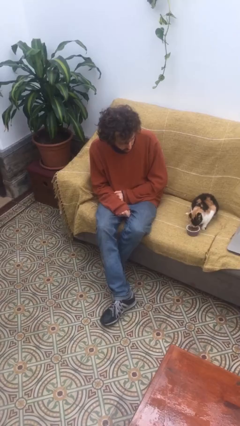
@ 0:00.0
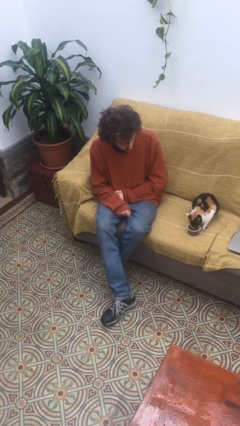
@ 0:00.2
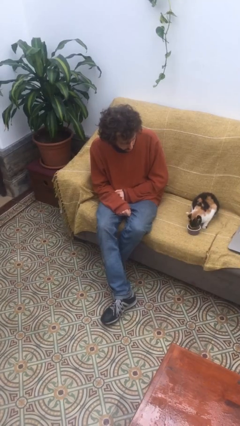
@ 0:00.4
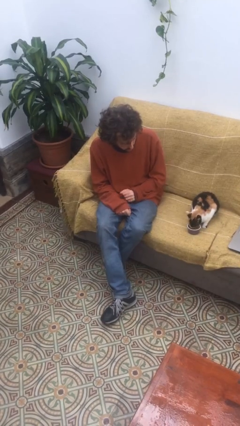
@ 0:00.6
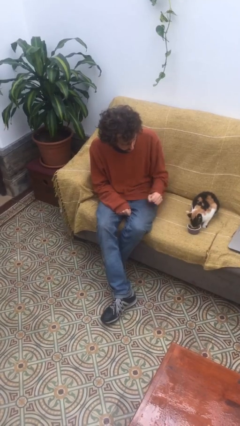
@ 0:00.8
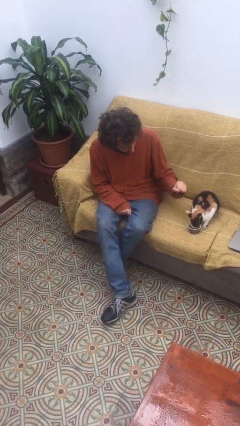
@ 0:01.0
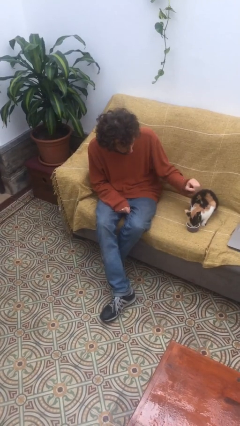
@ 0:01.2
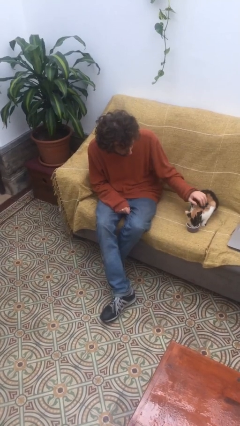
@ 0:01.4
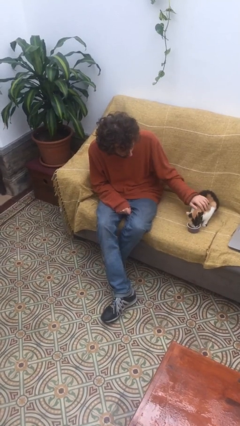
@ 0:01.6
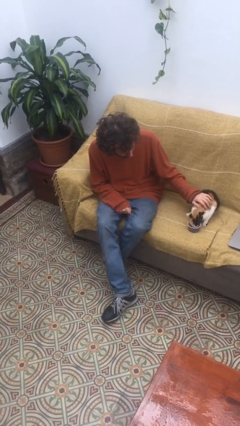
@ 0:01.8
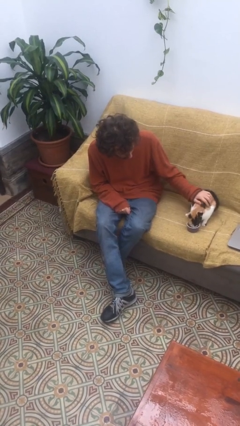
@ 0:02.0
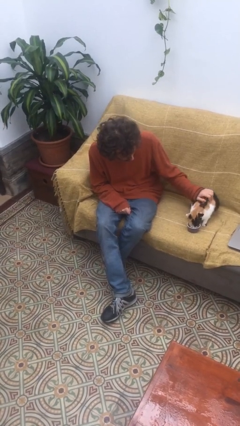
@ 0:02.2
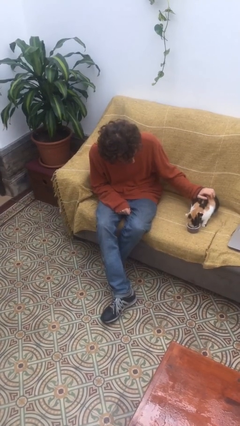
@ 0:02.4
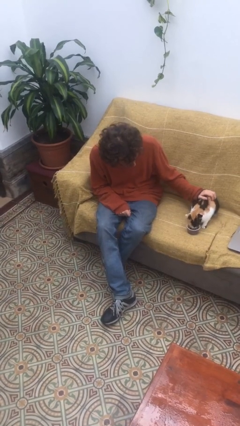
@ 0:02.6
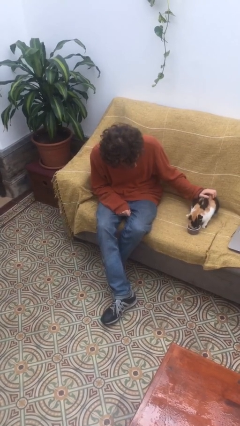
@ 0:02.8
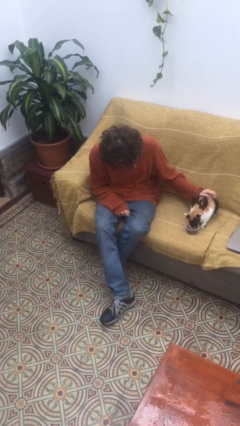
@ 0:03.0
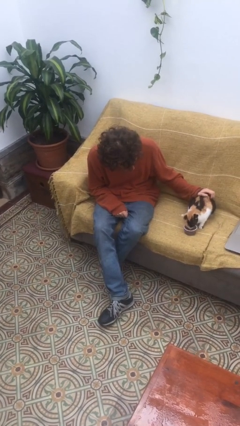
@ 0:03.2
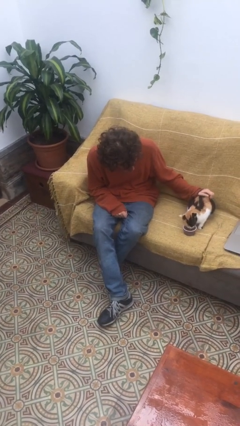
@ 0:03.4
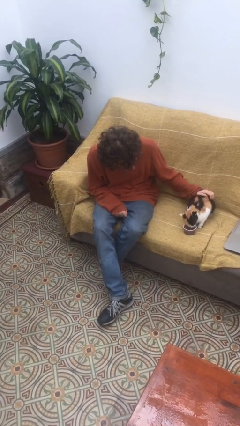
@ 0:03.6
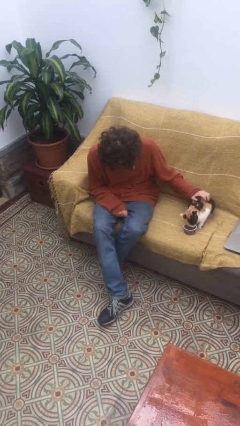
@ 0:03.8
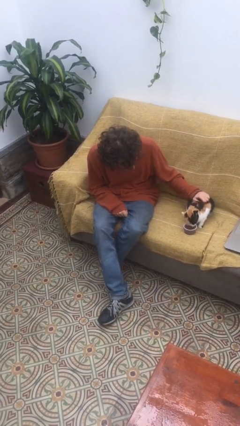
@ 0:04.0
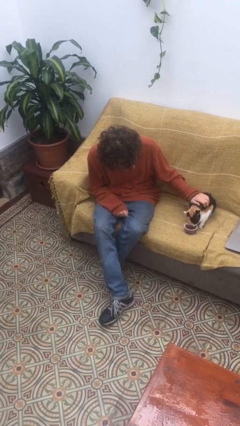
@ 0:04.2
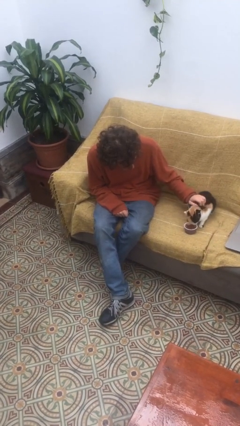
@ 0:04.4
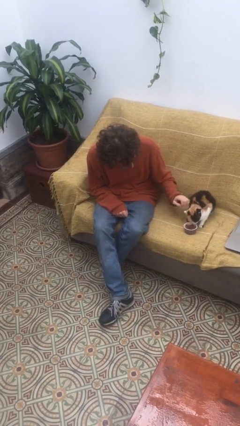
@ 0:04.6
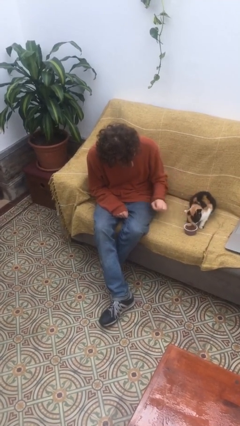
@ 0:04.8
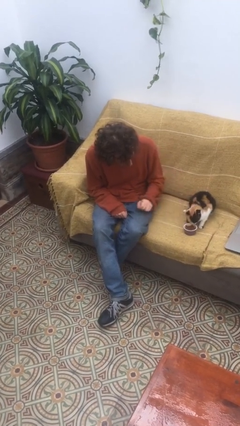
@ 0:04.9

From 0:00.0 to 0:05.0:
person pets cat

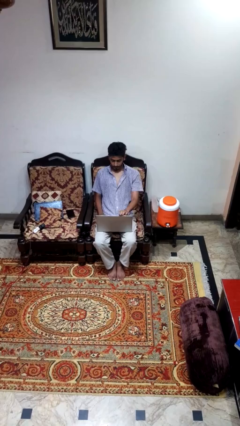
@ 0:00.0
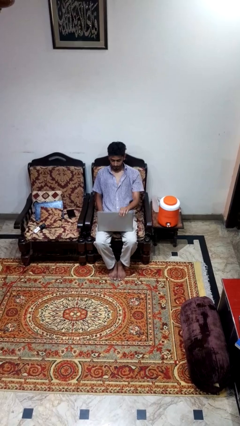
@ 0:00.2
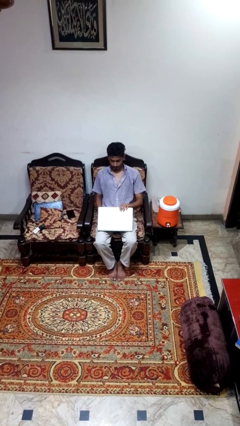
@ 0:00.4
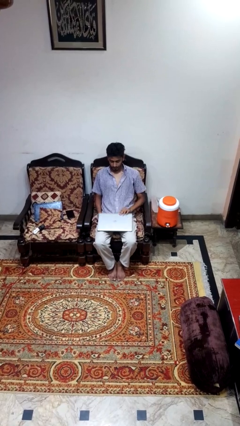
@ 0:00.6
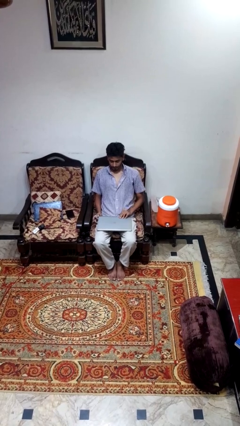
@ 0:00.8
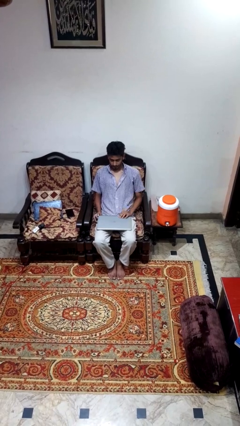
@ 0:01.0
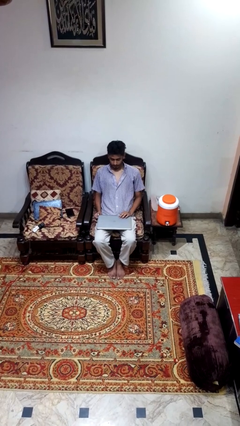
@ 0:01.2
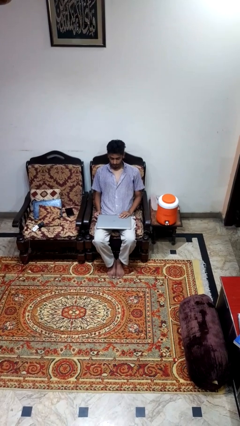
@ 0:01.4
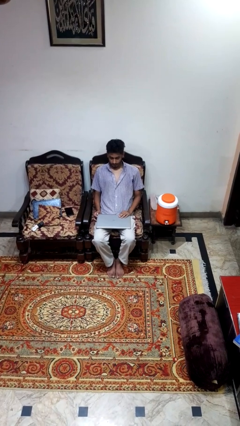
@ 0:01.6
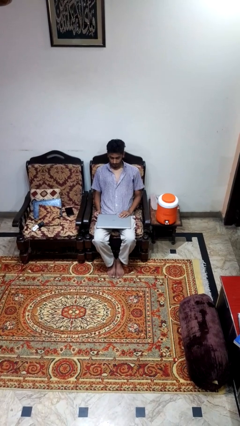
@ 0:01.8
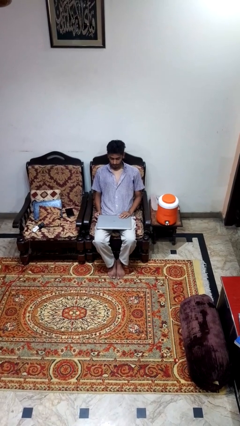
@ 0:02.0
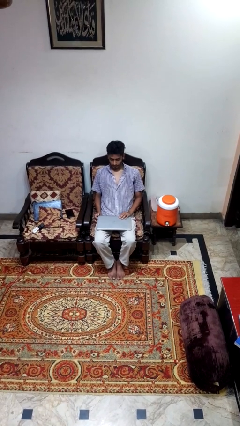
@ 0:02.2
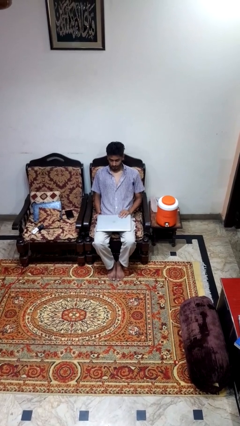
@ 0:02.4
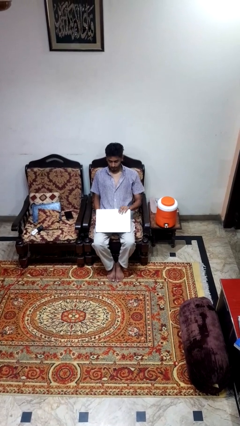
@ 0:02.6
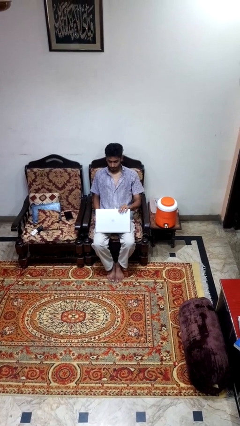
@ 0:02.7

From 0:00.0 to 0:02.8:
person closes laptop

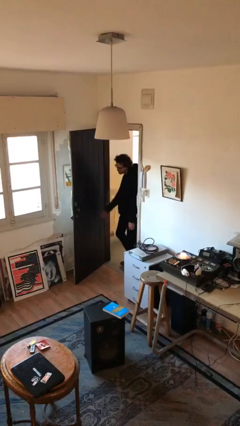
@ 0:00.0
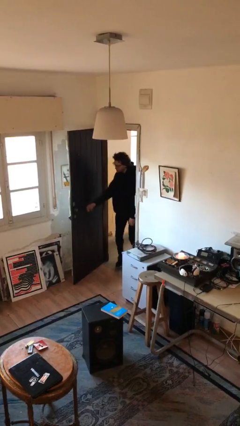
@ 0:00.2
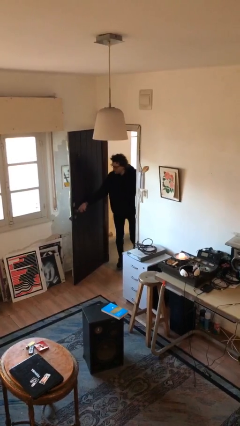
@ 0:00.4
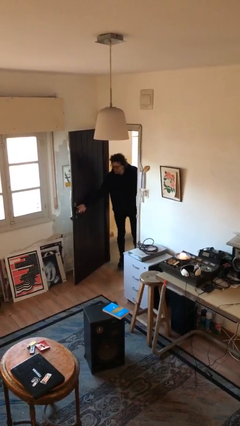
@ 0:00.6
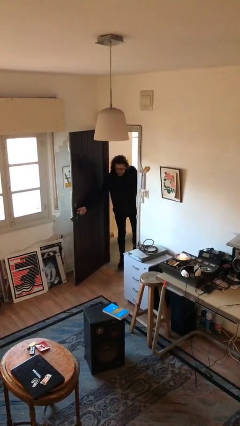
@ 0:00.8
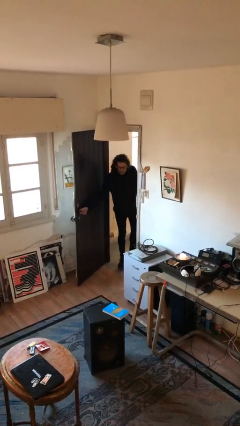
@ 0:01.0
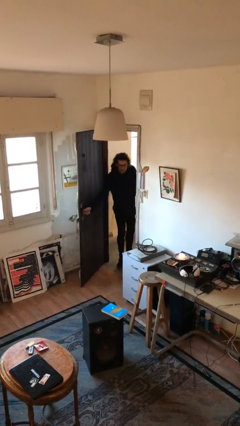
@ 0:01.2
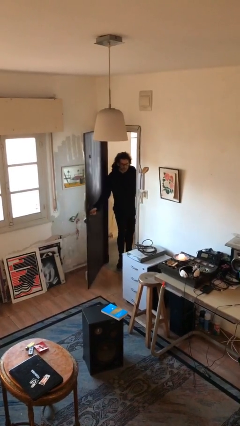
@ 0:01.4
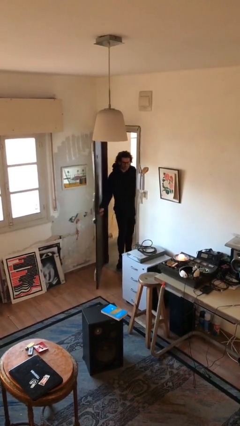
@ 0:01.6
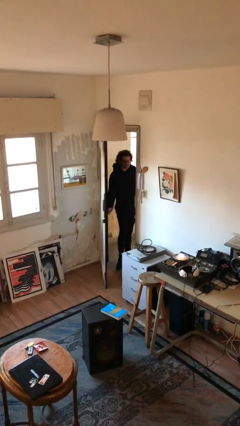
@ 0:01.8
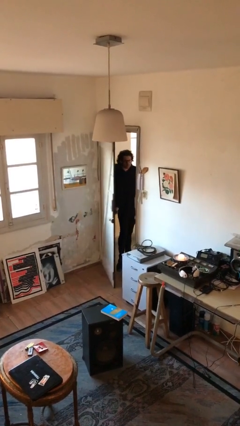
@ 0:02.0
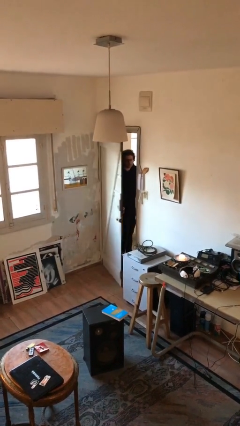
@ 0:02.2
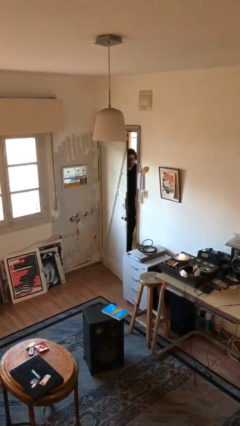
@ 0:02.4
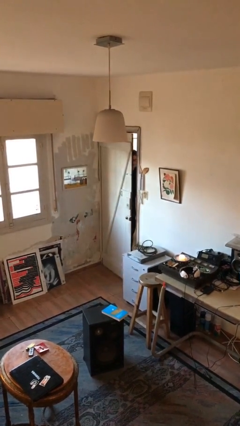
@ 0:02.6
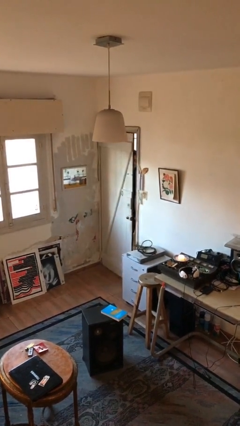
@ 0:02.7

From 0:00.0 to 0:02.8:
person closes facility door

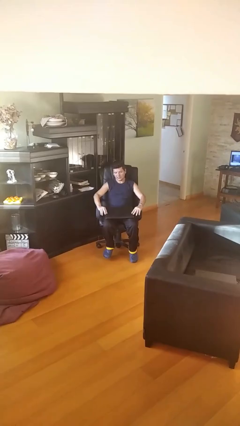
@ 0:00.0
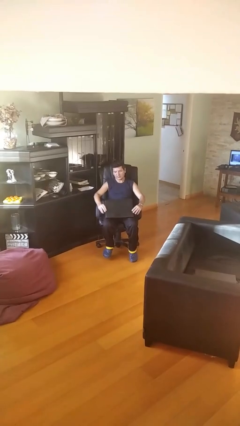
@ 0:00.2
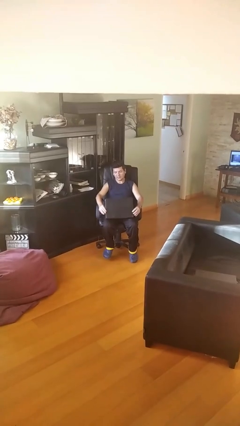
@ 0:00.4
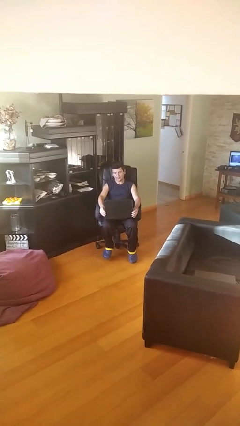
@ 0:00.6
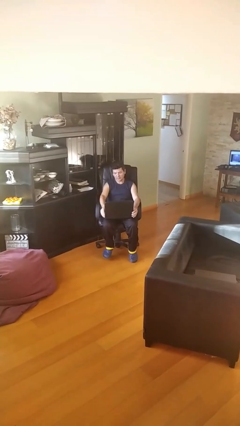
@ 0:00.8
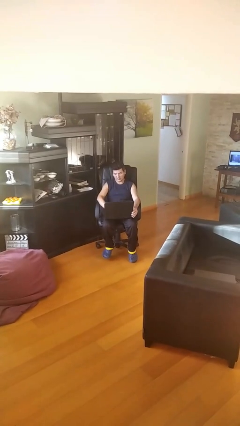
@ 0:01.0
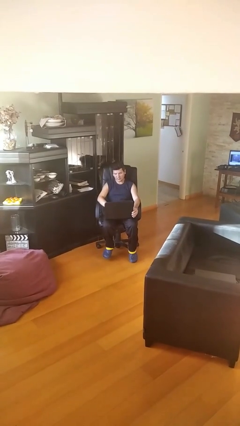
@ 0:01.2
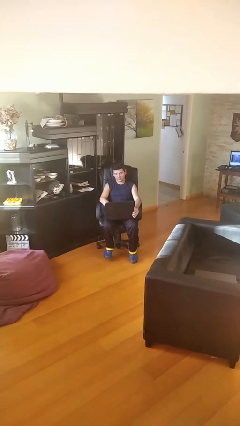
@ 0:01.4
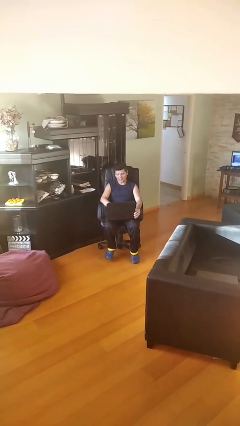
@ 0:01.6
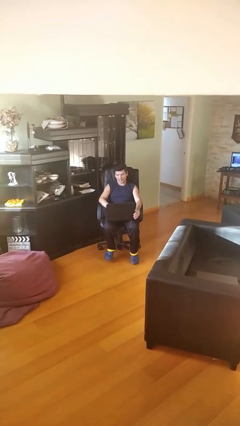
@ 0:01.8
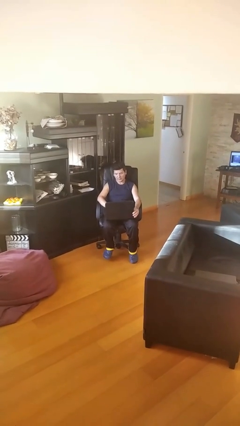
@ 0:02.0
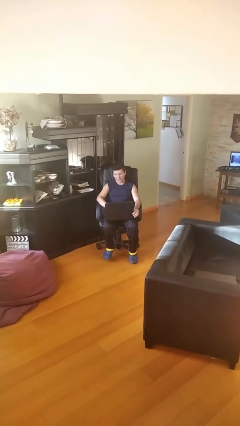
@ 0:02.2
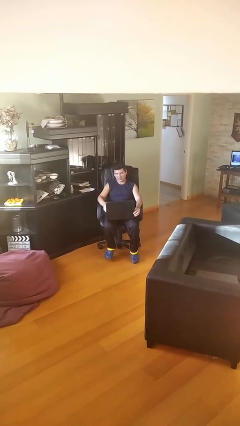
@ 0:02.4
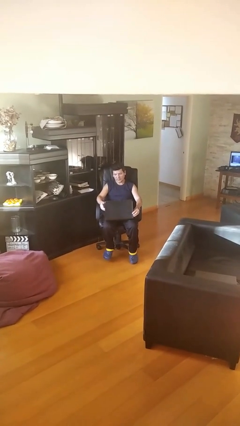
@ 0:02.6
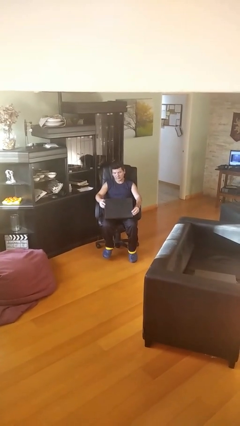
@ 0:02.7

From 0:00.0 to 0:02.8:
person interacts with laptop

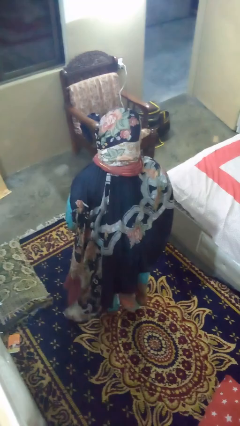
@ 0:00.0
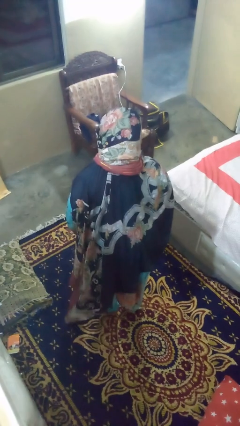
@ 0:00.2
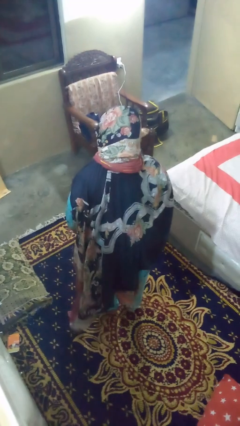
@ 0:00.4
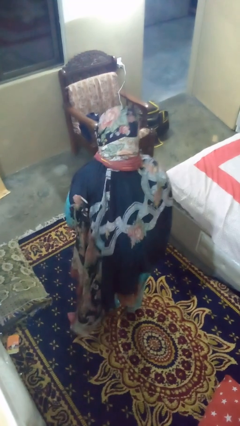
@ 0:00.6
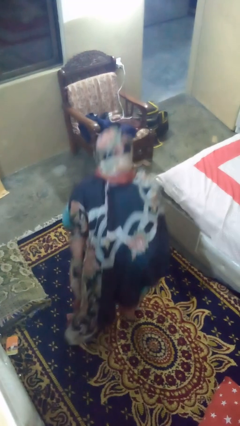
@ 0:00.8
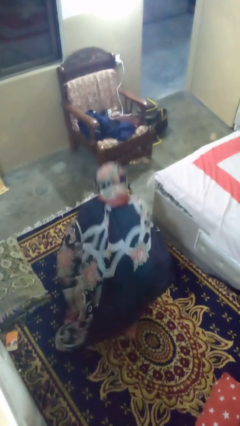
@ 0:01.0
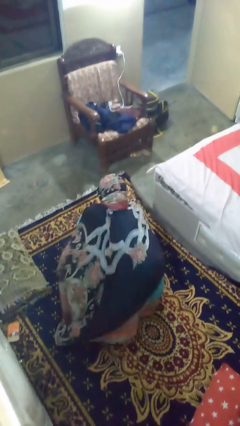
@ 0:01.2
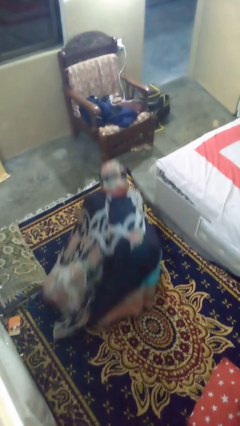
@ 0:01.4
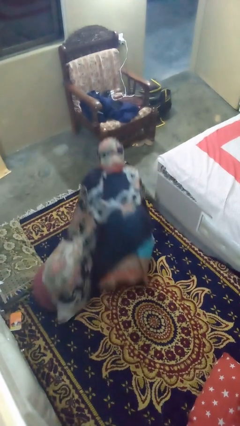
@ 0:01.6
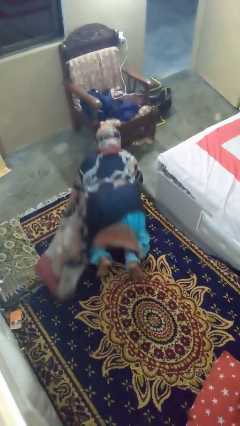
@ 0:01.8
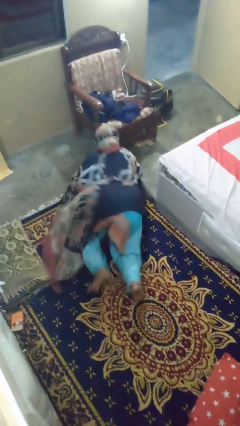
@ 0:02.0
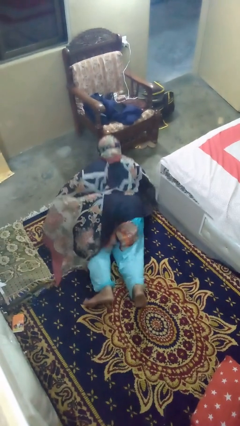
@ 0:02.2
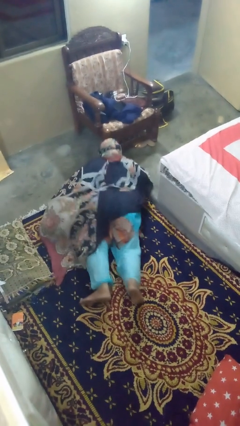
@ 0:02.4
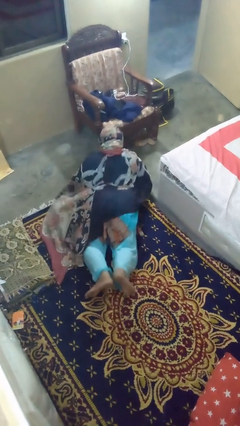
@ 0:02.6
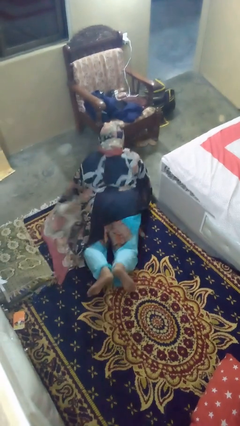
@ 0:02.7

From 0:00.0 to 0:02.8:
person exercises with pushup

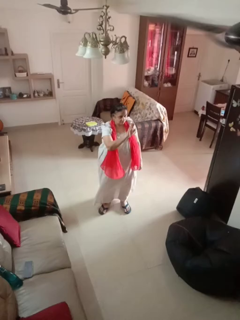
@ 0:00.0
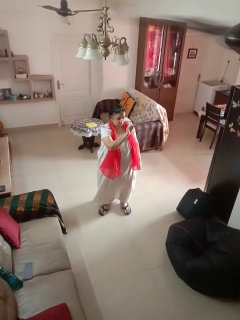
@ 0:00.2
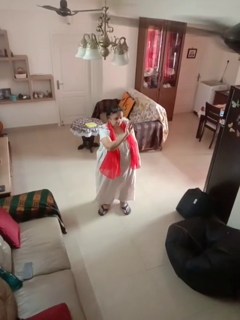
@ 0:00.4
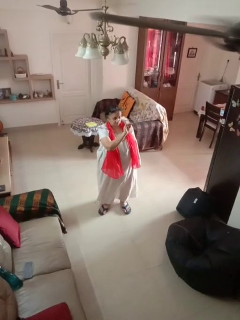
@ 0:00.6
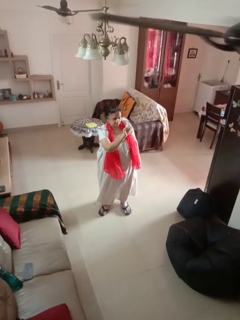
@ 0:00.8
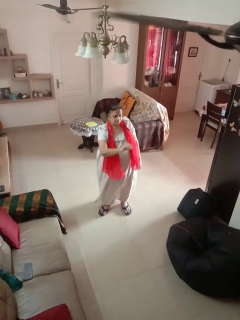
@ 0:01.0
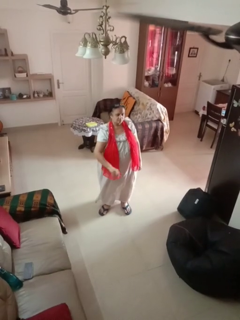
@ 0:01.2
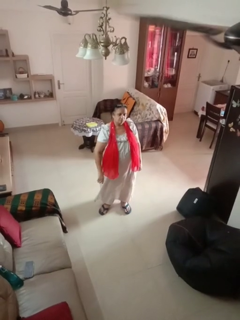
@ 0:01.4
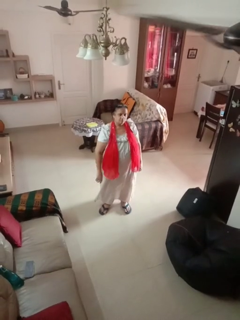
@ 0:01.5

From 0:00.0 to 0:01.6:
person gestures come here
